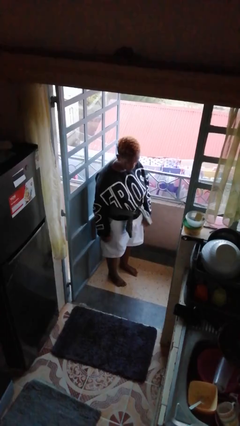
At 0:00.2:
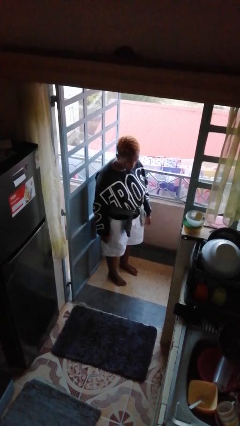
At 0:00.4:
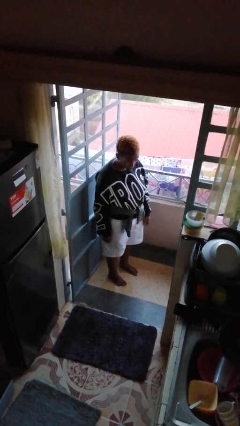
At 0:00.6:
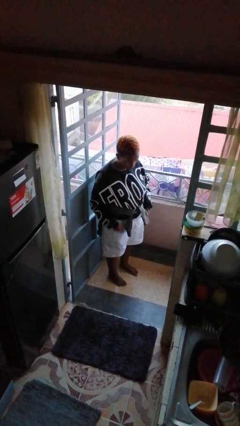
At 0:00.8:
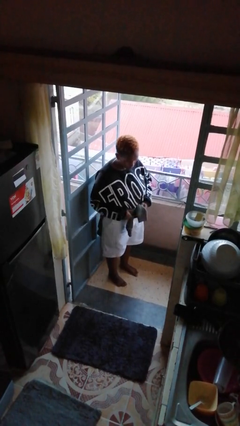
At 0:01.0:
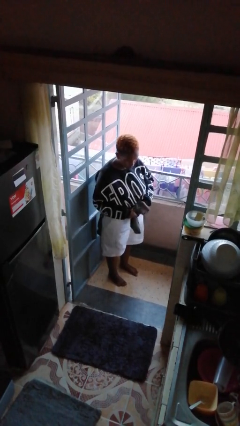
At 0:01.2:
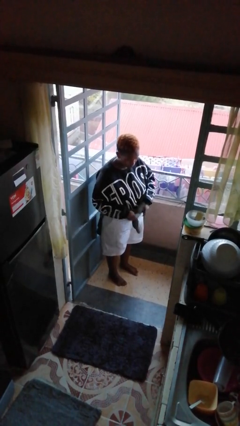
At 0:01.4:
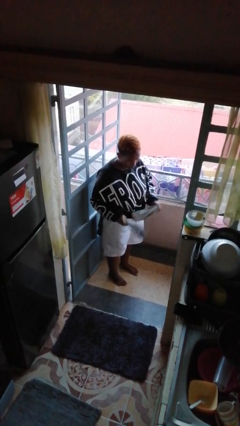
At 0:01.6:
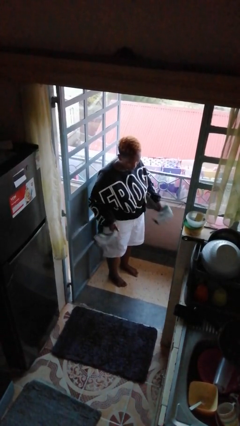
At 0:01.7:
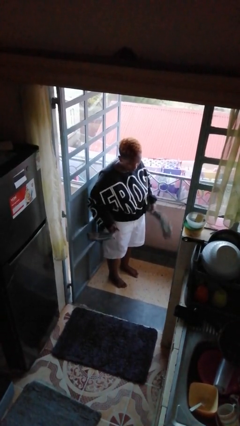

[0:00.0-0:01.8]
person unties jacket around waist

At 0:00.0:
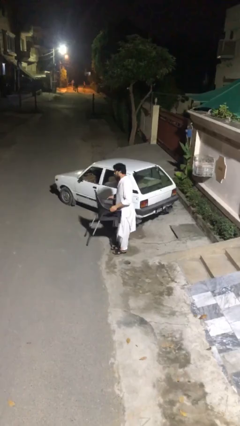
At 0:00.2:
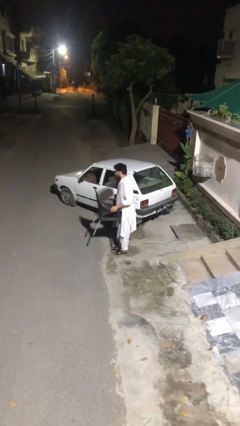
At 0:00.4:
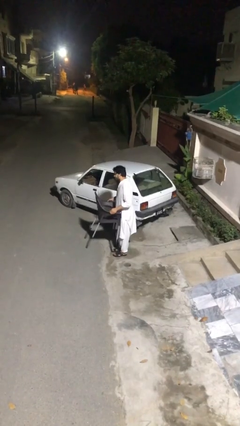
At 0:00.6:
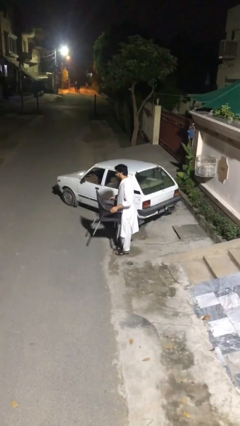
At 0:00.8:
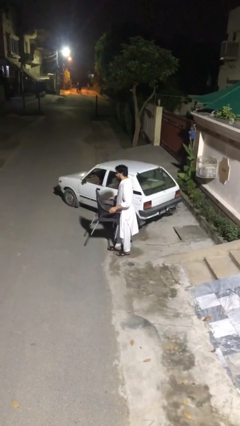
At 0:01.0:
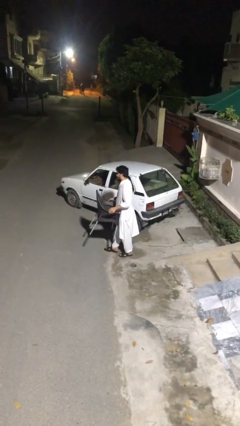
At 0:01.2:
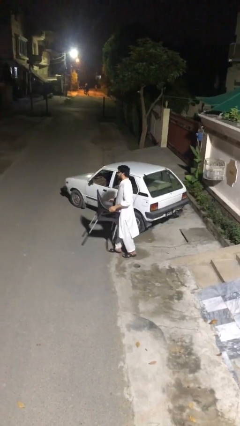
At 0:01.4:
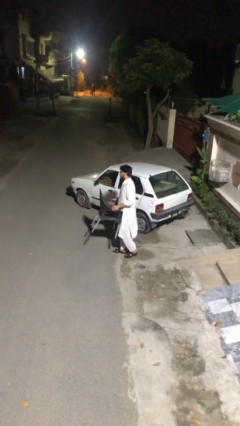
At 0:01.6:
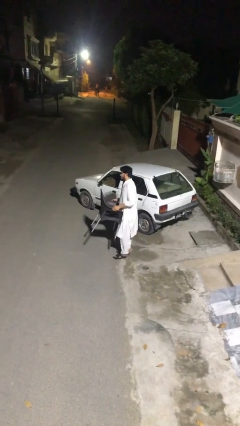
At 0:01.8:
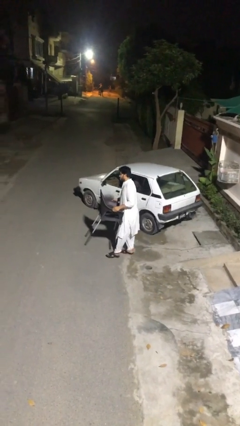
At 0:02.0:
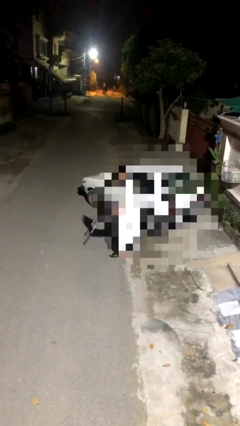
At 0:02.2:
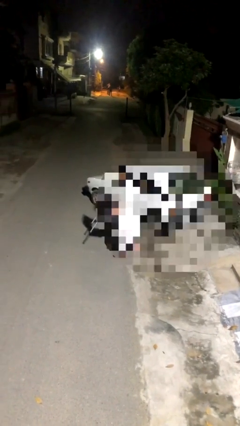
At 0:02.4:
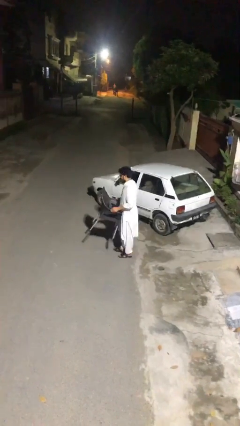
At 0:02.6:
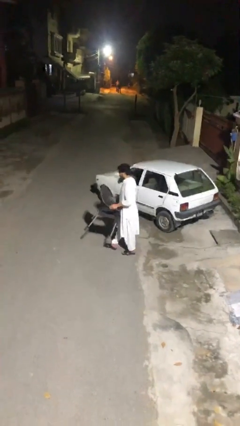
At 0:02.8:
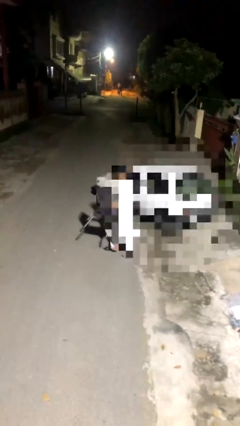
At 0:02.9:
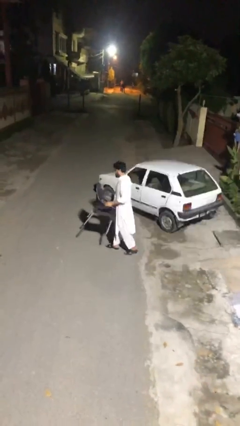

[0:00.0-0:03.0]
person carries heavy object

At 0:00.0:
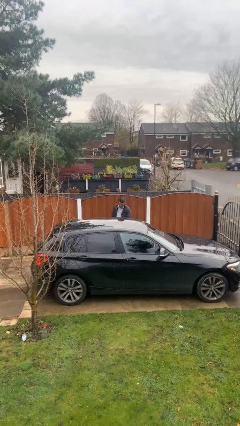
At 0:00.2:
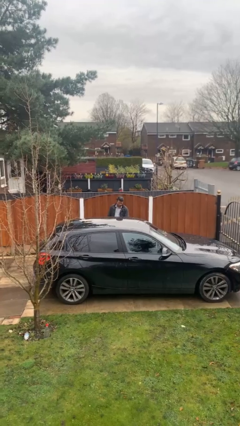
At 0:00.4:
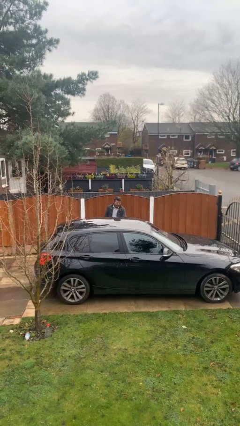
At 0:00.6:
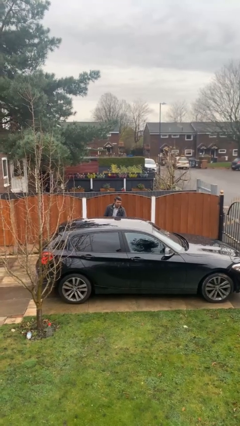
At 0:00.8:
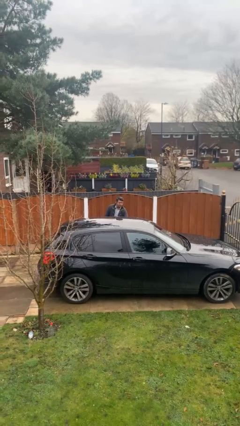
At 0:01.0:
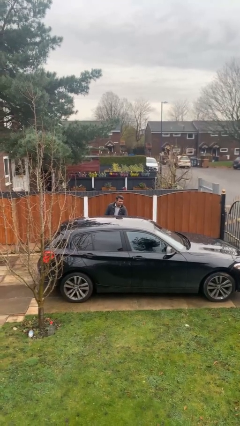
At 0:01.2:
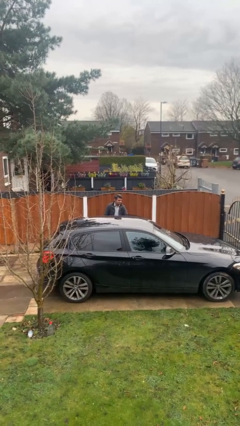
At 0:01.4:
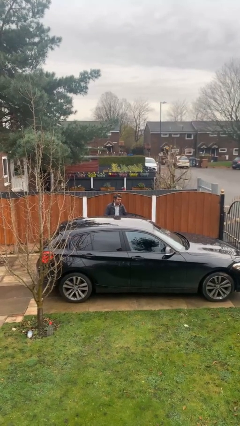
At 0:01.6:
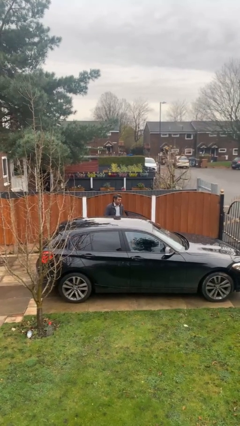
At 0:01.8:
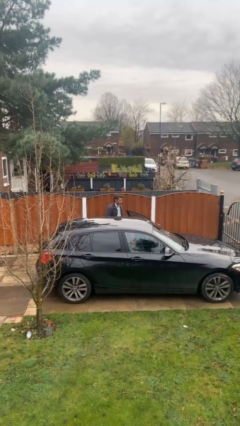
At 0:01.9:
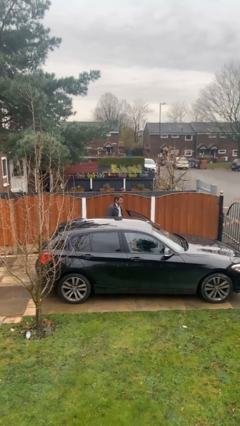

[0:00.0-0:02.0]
person opens car door

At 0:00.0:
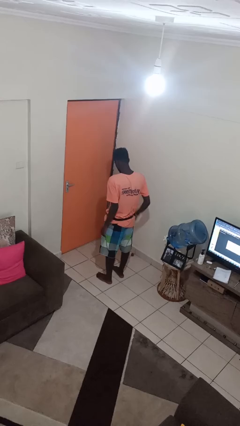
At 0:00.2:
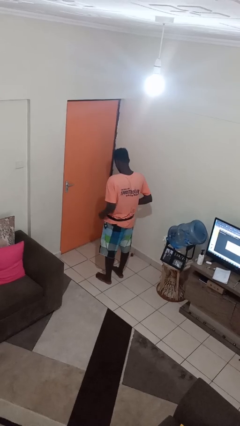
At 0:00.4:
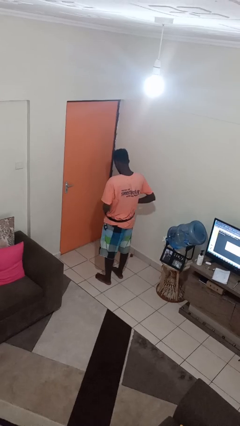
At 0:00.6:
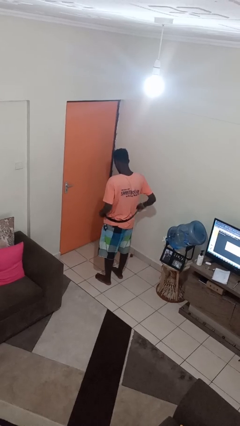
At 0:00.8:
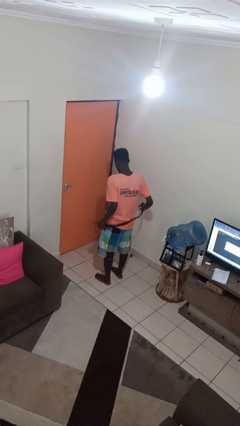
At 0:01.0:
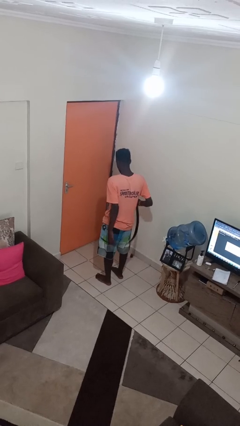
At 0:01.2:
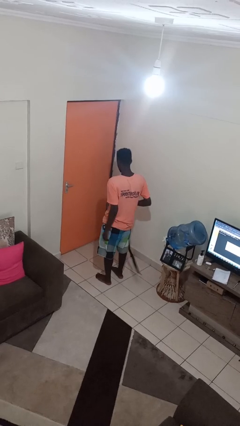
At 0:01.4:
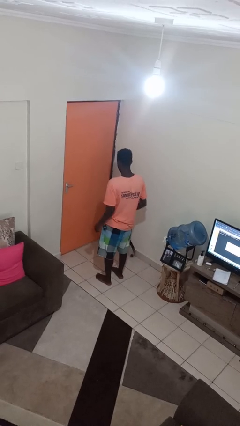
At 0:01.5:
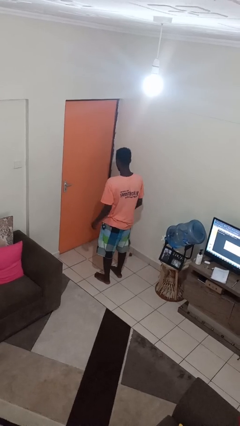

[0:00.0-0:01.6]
person takes off belt

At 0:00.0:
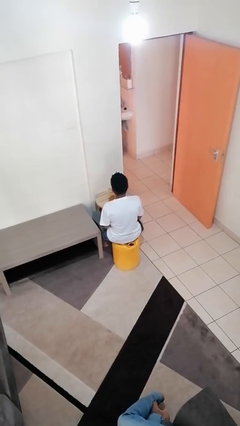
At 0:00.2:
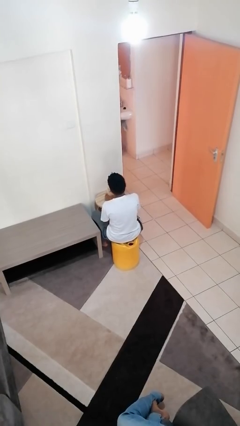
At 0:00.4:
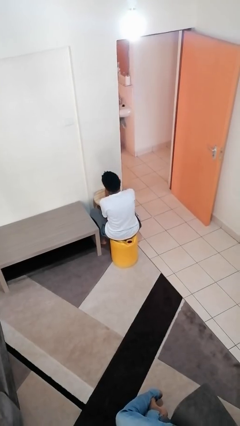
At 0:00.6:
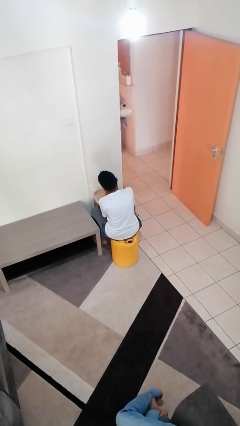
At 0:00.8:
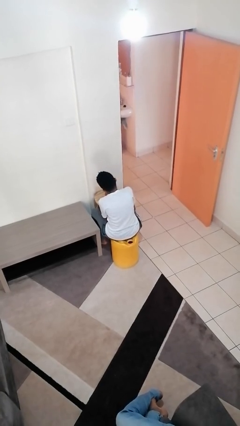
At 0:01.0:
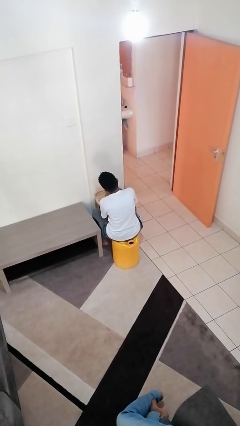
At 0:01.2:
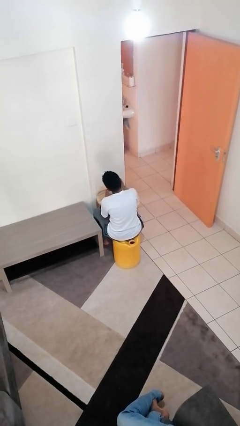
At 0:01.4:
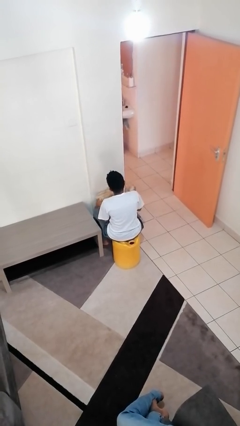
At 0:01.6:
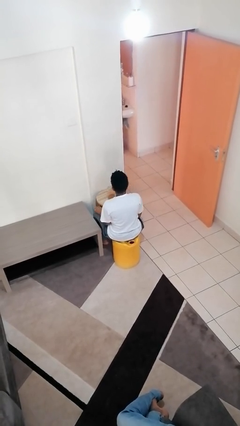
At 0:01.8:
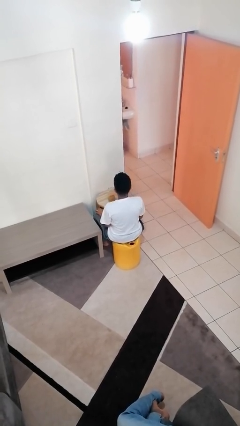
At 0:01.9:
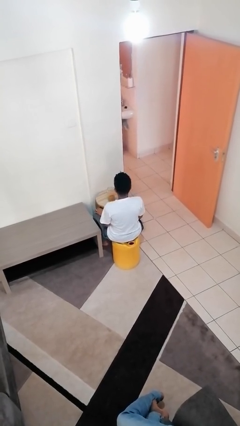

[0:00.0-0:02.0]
person opens jar

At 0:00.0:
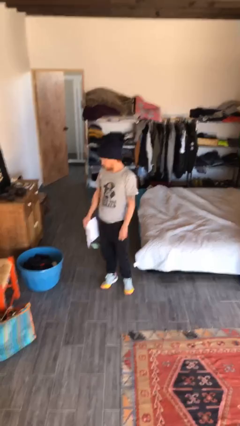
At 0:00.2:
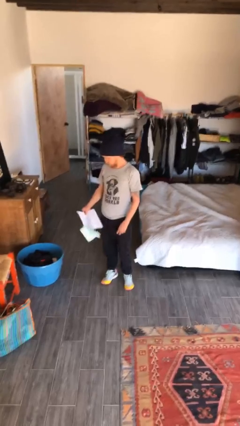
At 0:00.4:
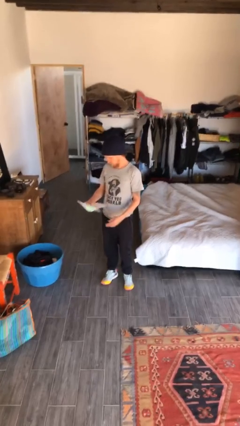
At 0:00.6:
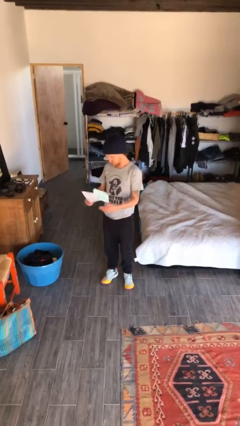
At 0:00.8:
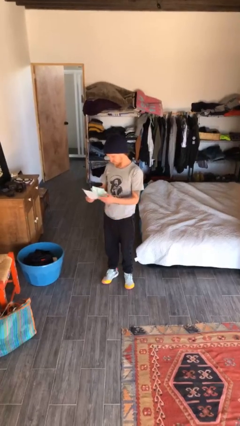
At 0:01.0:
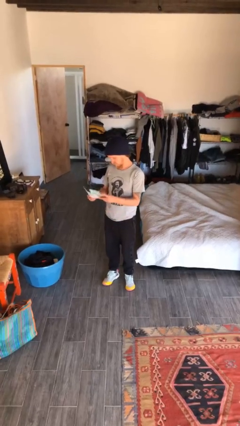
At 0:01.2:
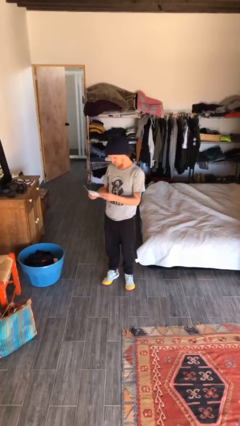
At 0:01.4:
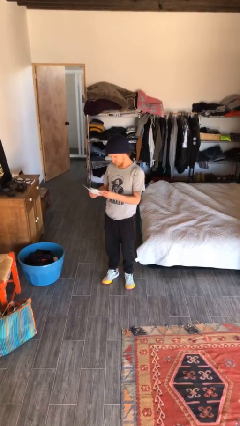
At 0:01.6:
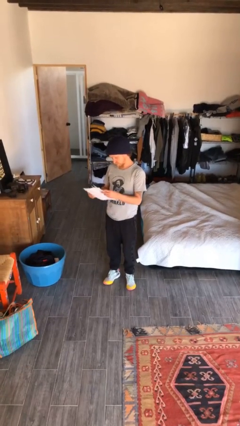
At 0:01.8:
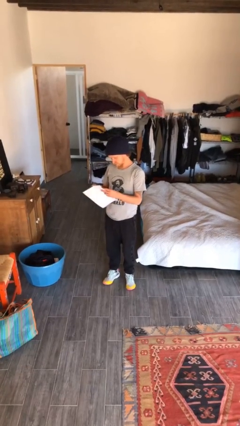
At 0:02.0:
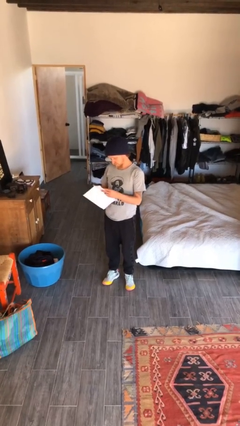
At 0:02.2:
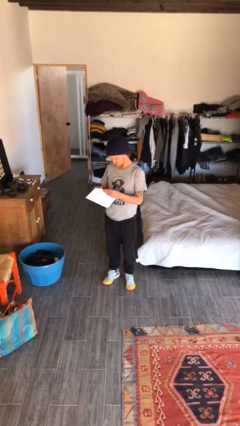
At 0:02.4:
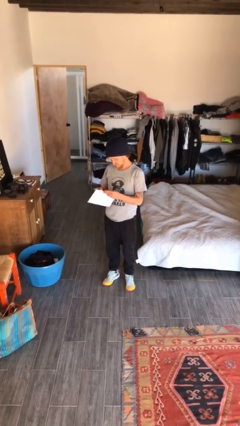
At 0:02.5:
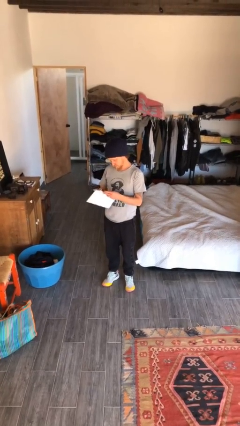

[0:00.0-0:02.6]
person reads document

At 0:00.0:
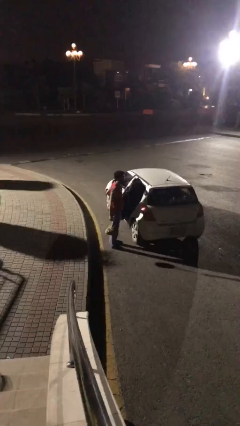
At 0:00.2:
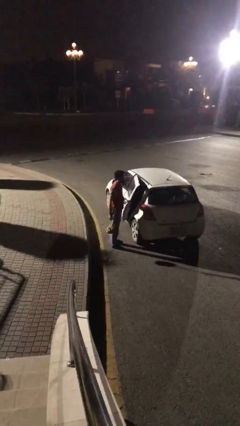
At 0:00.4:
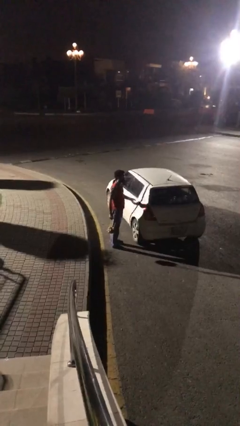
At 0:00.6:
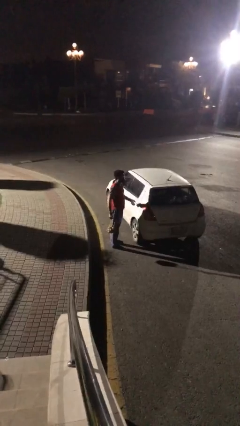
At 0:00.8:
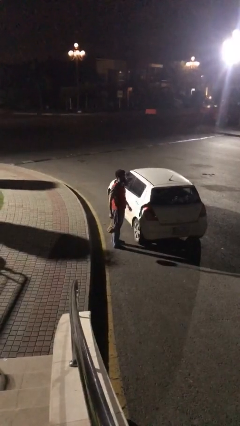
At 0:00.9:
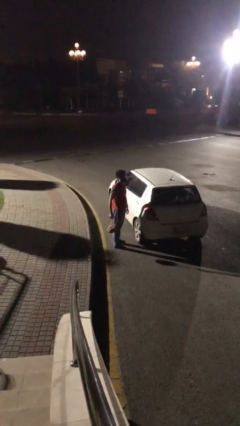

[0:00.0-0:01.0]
person closes car door

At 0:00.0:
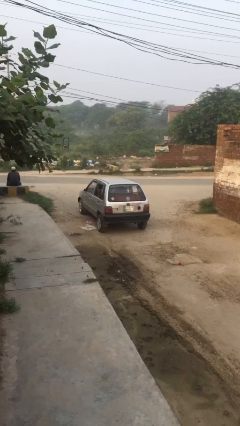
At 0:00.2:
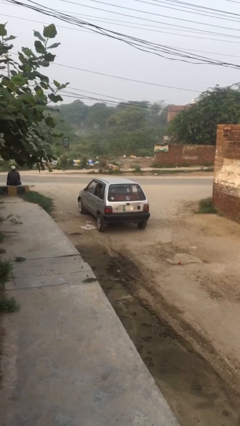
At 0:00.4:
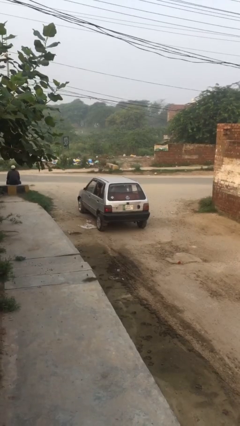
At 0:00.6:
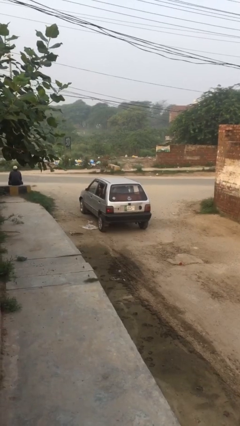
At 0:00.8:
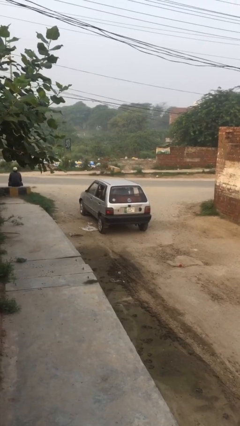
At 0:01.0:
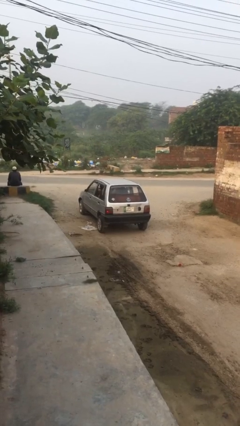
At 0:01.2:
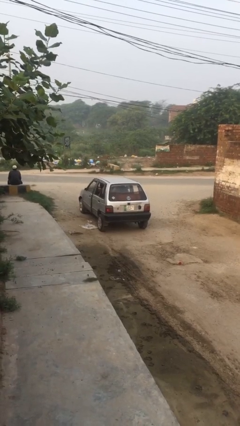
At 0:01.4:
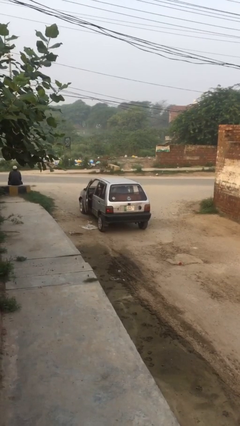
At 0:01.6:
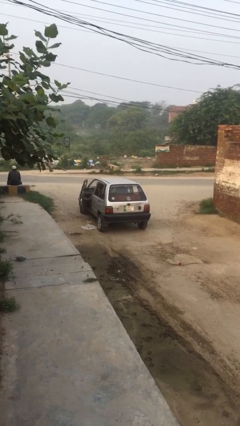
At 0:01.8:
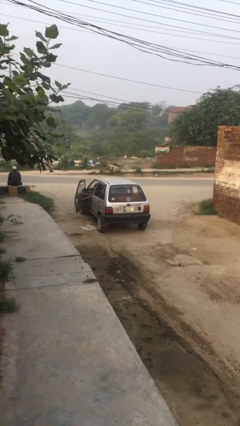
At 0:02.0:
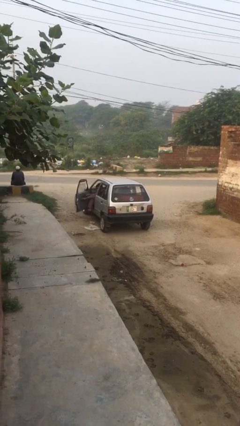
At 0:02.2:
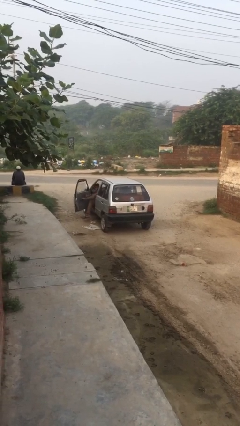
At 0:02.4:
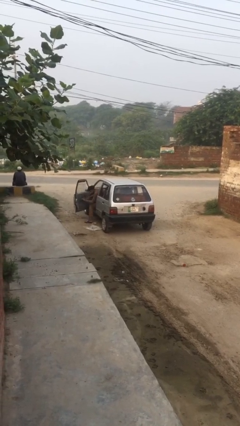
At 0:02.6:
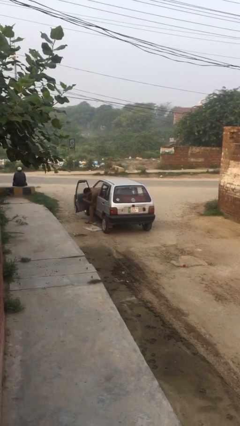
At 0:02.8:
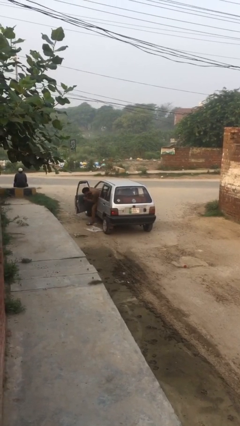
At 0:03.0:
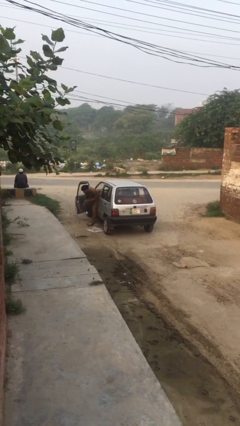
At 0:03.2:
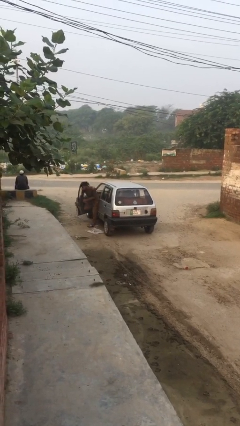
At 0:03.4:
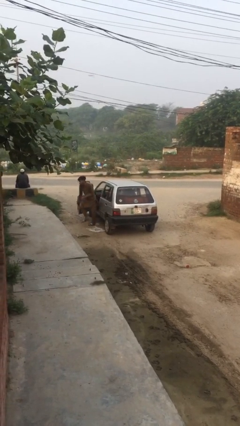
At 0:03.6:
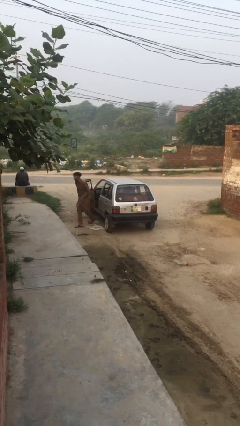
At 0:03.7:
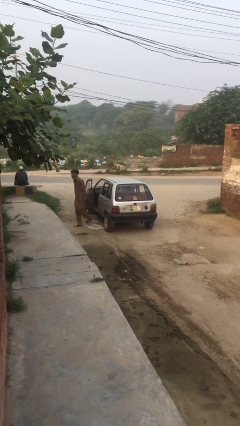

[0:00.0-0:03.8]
car drops off person
